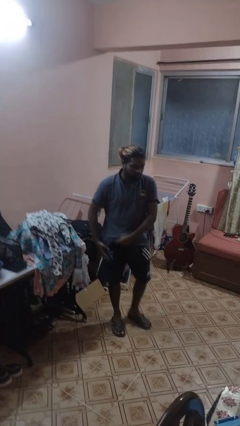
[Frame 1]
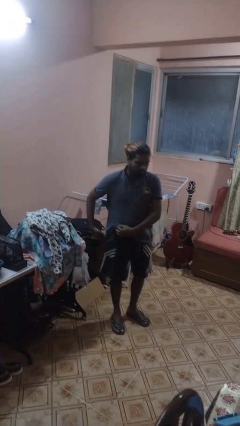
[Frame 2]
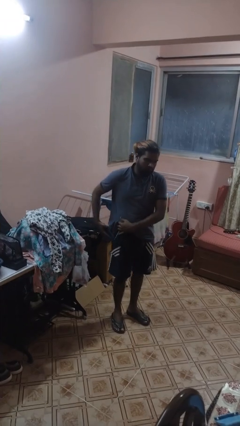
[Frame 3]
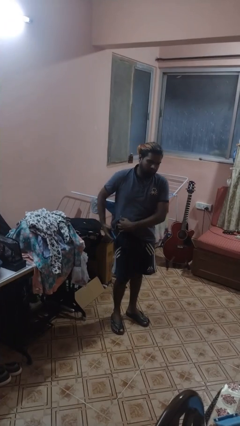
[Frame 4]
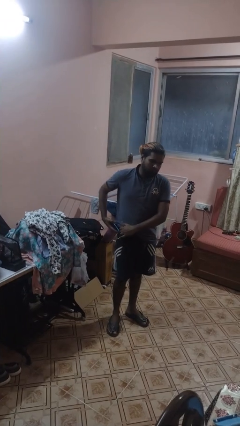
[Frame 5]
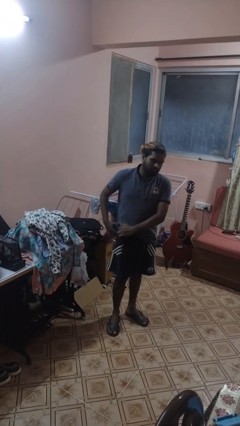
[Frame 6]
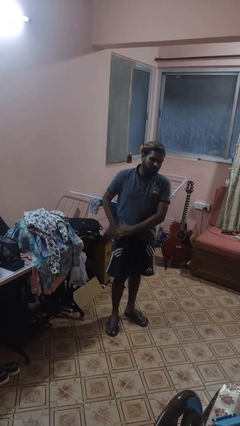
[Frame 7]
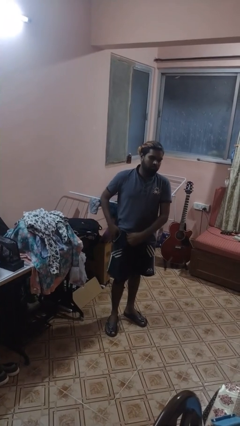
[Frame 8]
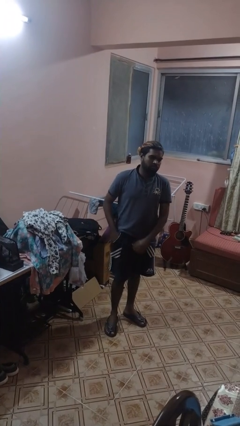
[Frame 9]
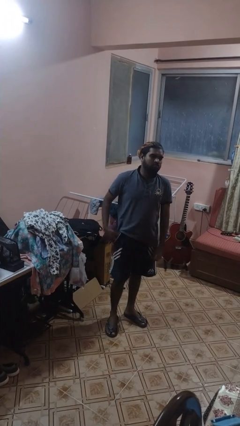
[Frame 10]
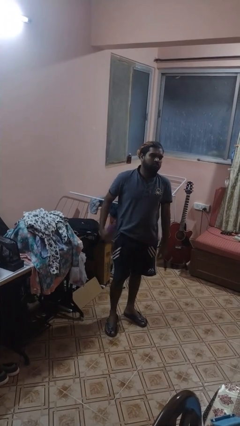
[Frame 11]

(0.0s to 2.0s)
person puts phone into pocket

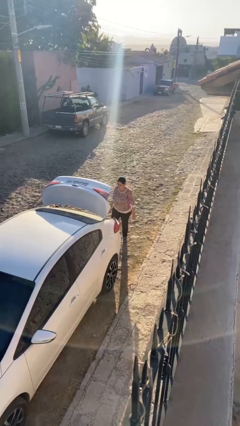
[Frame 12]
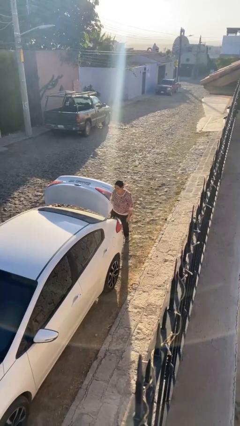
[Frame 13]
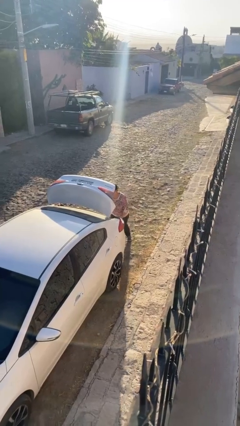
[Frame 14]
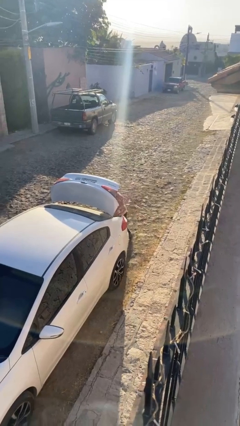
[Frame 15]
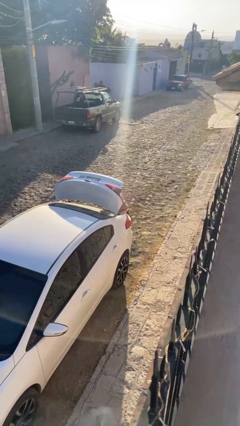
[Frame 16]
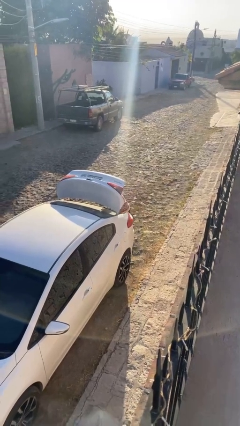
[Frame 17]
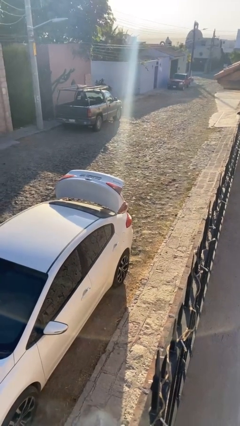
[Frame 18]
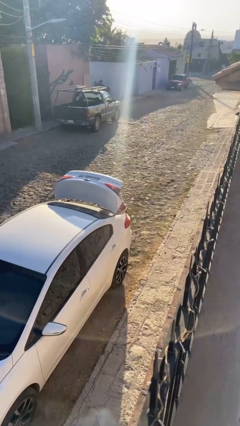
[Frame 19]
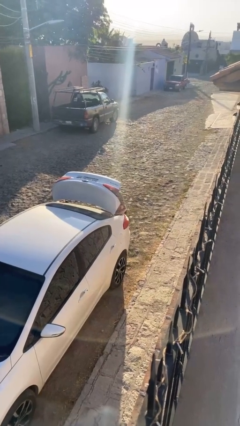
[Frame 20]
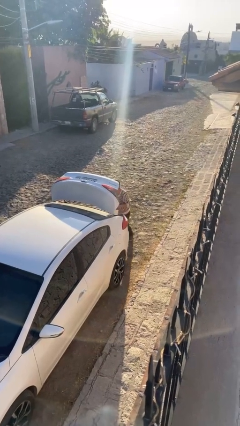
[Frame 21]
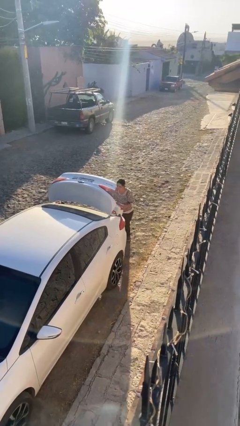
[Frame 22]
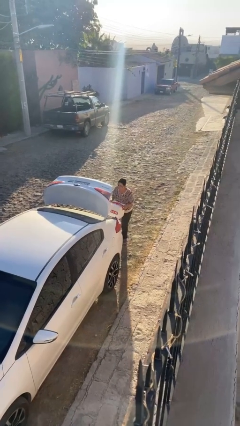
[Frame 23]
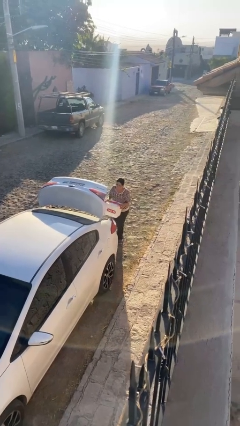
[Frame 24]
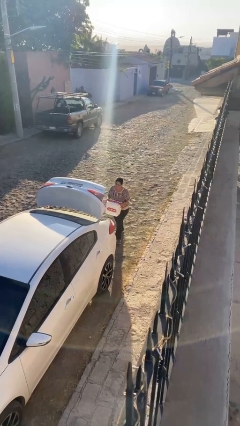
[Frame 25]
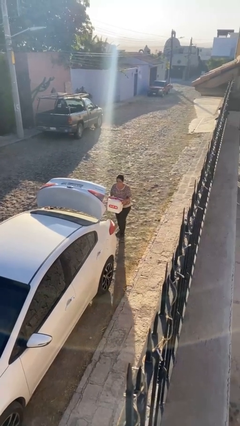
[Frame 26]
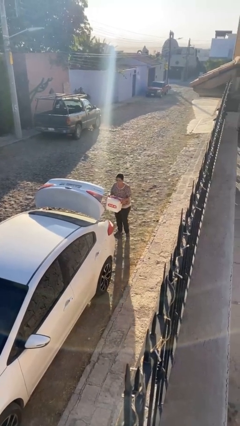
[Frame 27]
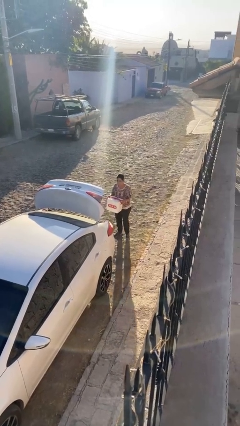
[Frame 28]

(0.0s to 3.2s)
person unloads car

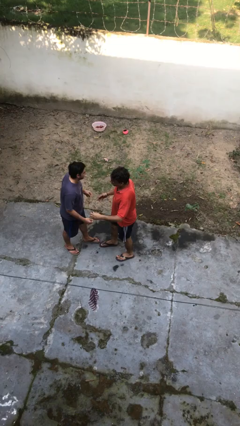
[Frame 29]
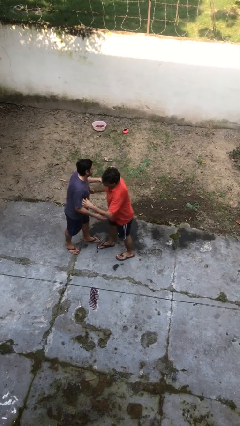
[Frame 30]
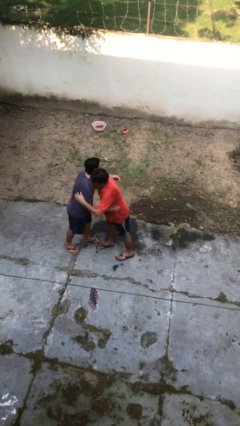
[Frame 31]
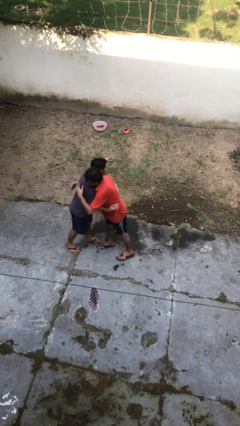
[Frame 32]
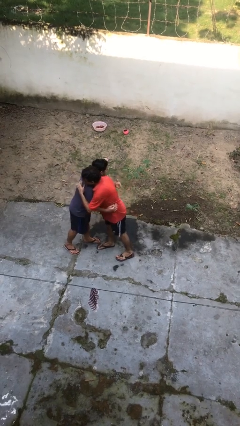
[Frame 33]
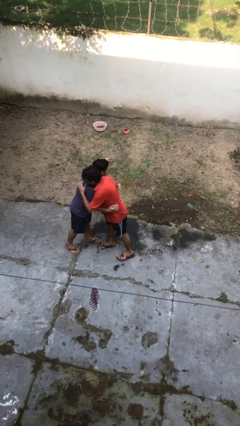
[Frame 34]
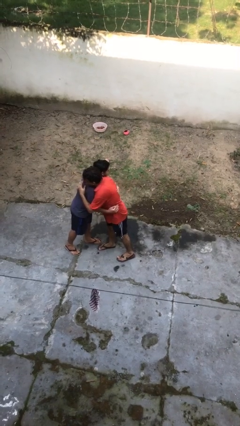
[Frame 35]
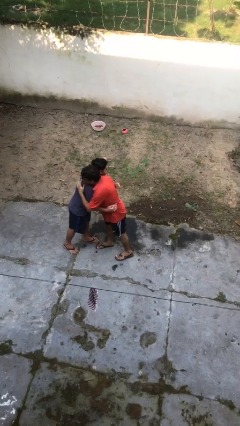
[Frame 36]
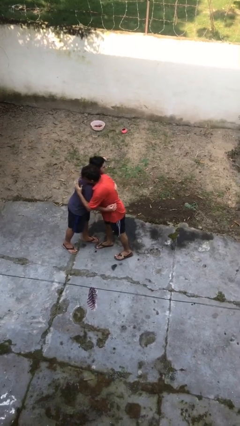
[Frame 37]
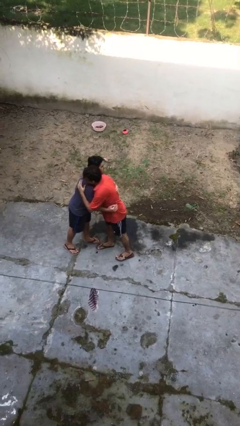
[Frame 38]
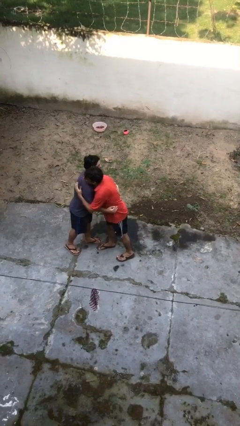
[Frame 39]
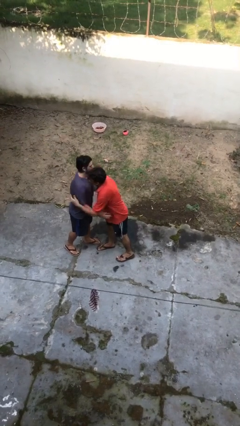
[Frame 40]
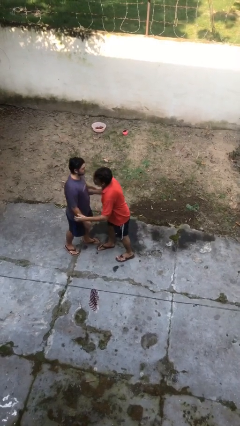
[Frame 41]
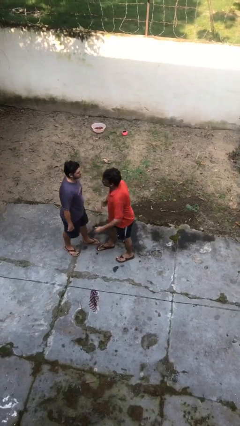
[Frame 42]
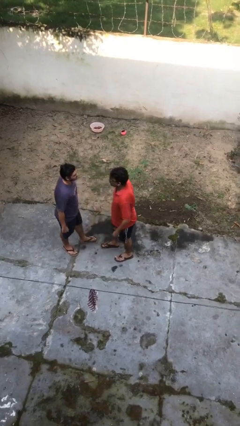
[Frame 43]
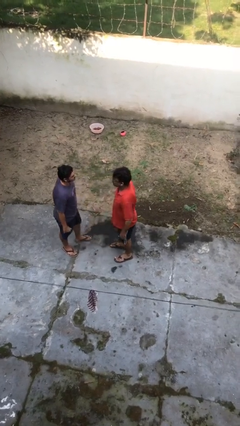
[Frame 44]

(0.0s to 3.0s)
person embraces person

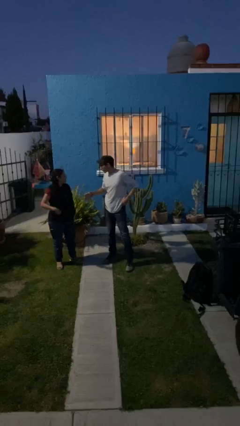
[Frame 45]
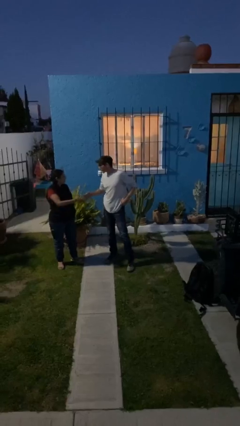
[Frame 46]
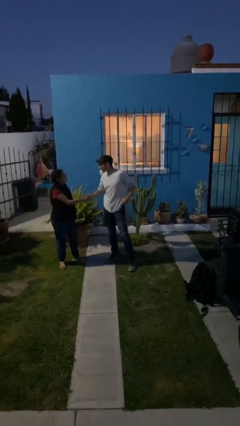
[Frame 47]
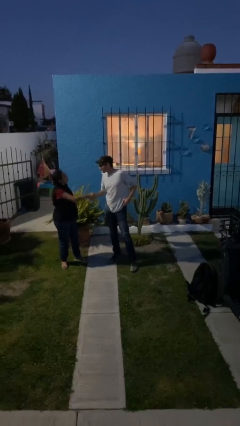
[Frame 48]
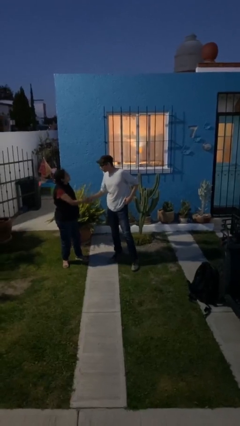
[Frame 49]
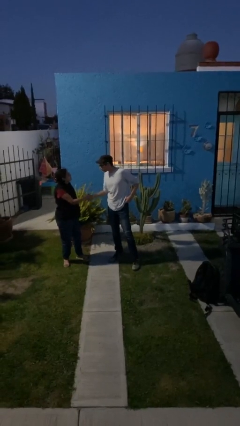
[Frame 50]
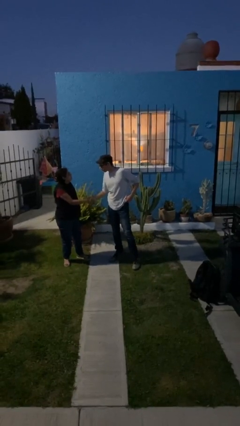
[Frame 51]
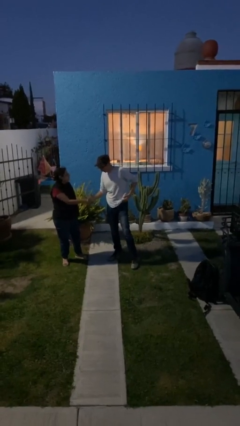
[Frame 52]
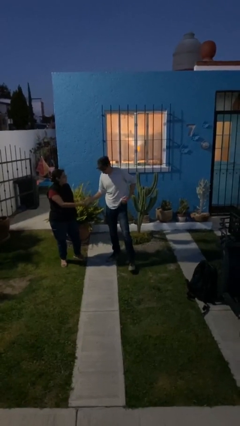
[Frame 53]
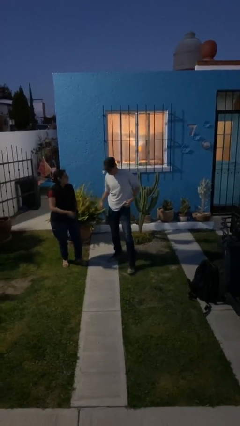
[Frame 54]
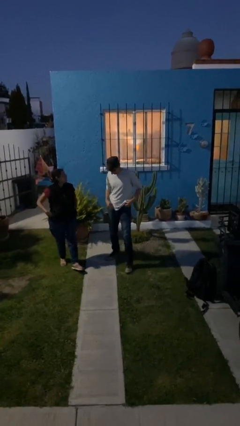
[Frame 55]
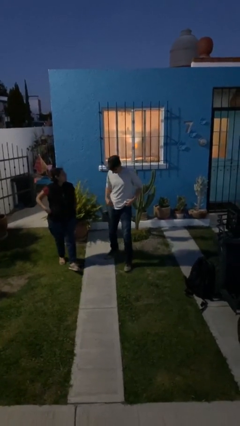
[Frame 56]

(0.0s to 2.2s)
person shakes hand

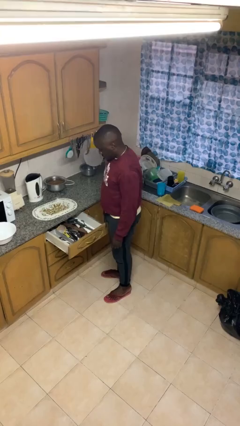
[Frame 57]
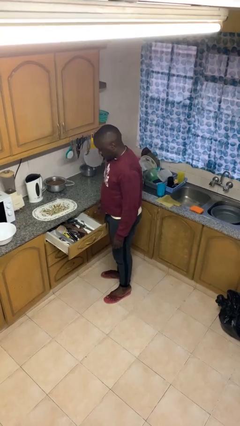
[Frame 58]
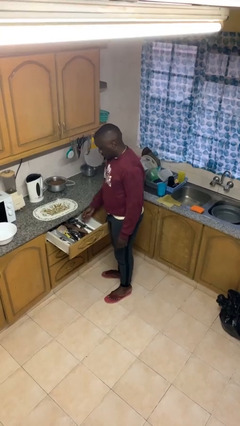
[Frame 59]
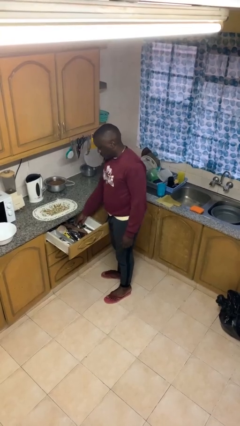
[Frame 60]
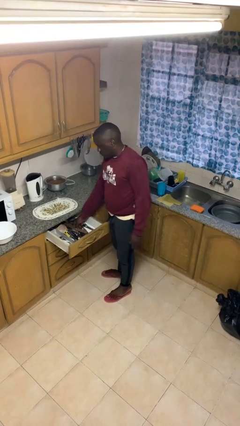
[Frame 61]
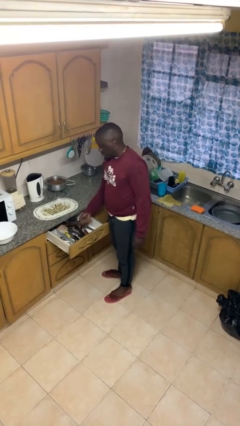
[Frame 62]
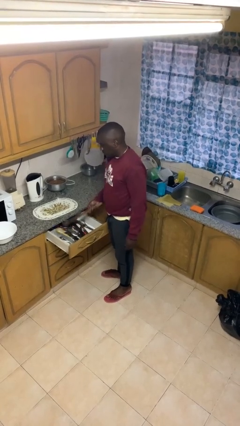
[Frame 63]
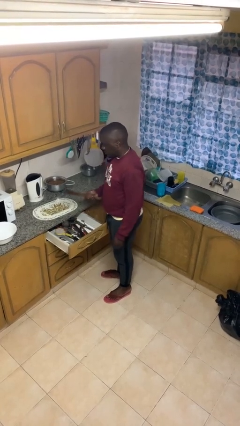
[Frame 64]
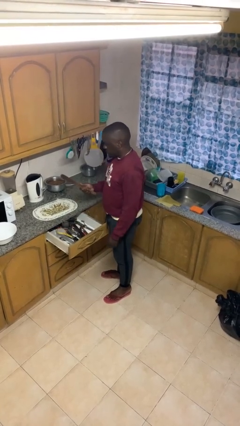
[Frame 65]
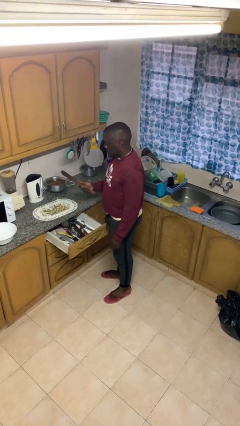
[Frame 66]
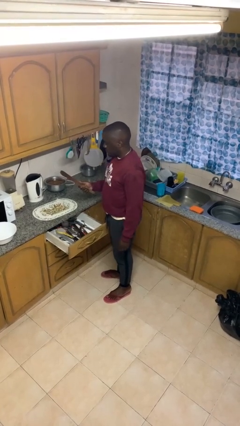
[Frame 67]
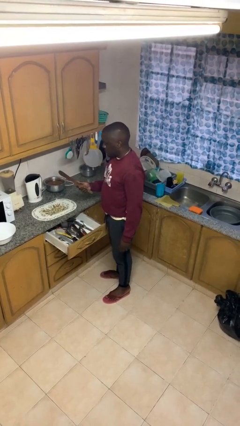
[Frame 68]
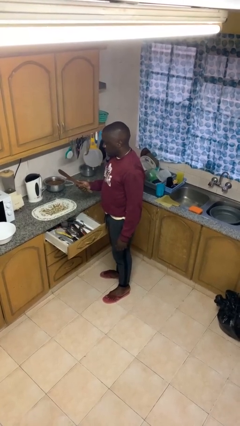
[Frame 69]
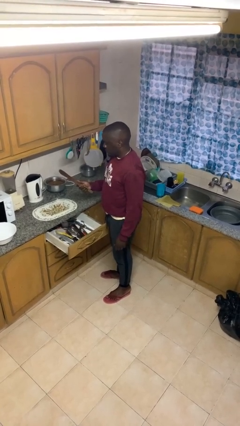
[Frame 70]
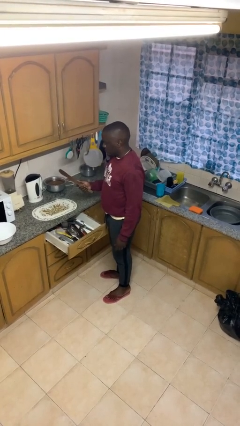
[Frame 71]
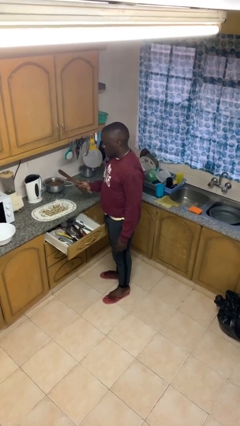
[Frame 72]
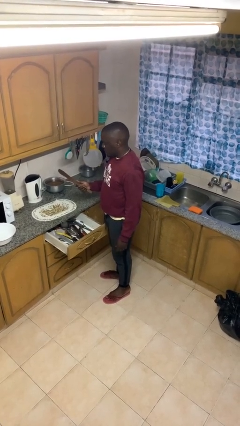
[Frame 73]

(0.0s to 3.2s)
person takes object from kitchen drawer

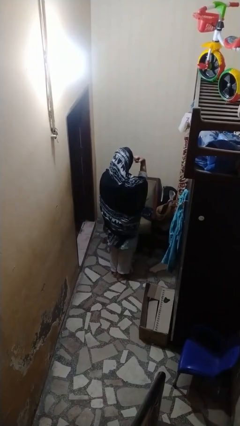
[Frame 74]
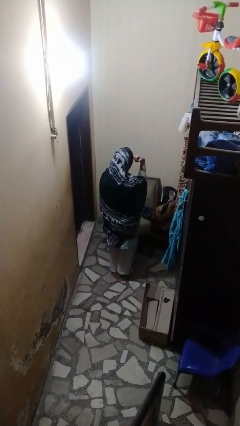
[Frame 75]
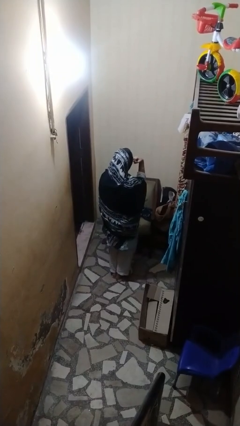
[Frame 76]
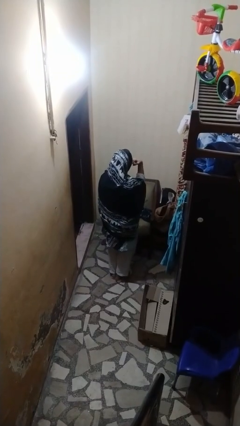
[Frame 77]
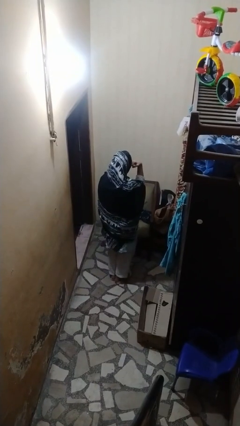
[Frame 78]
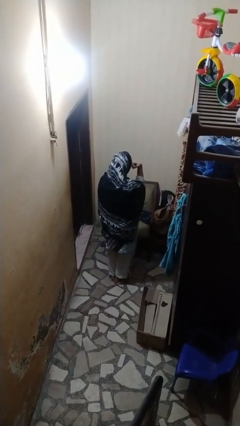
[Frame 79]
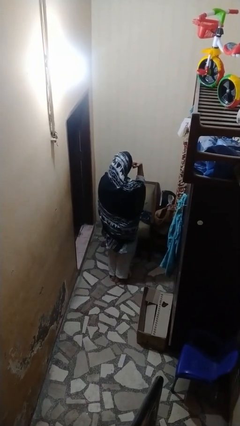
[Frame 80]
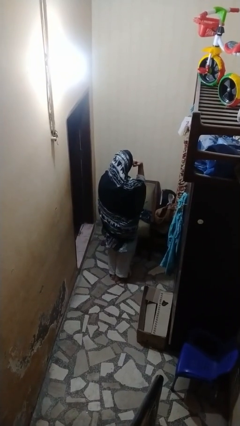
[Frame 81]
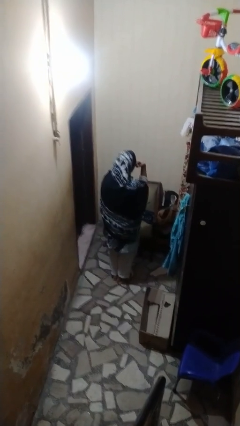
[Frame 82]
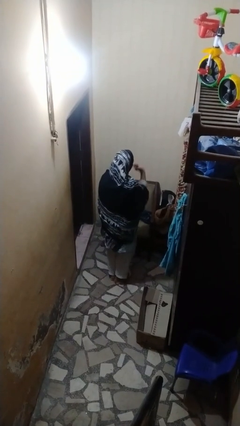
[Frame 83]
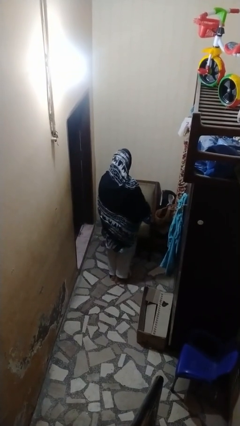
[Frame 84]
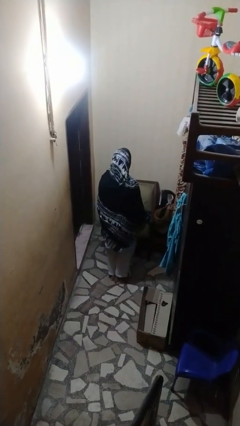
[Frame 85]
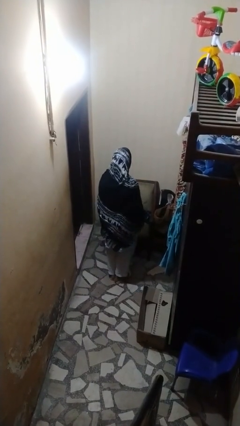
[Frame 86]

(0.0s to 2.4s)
person gestures watch closely

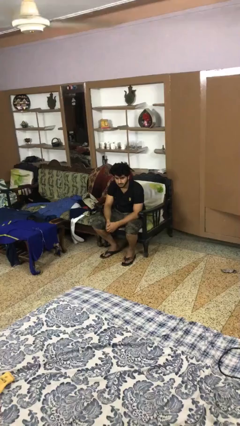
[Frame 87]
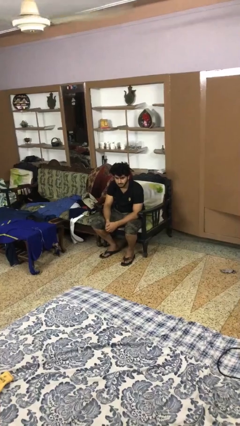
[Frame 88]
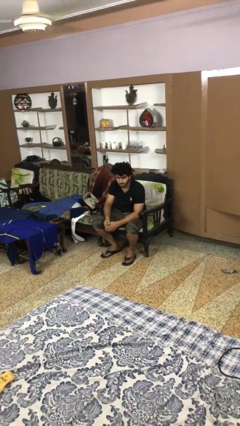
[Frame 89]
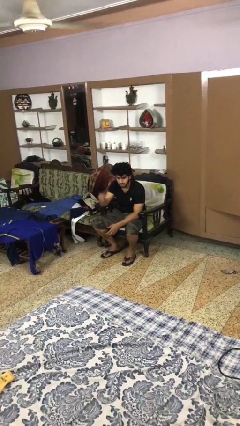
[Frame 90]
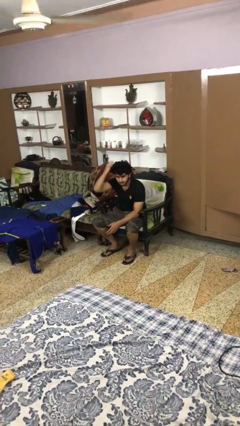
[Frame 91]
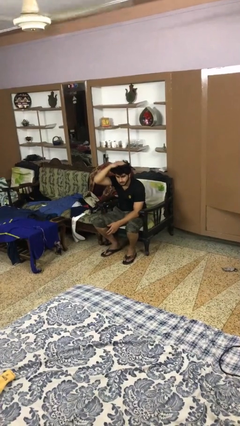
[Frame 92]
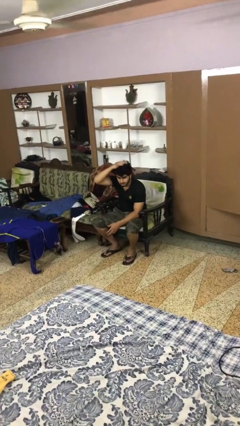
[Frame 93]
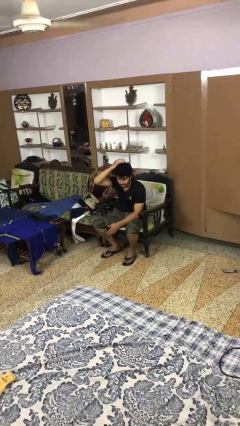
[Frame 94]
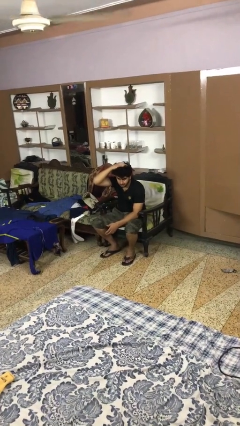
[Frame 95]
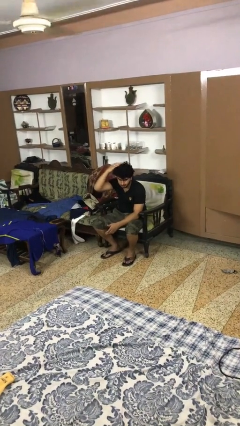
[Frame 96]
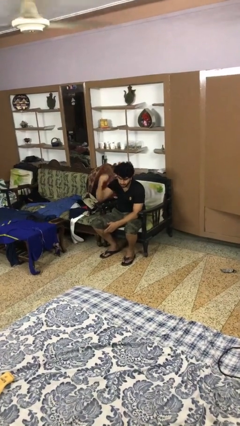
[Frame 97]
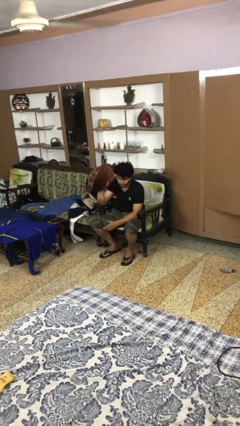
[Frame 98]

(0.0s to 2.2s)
person pats head
